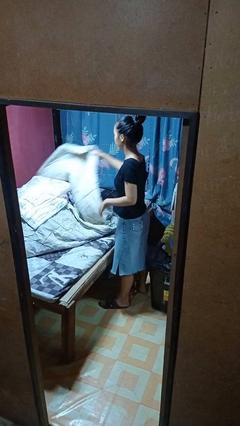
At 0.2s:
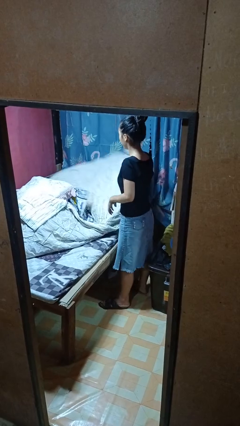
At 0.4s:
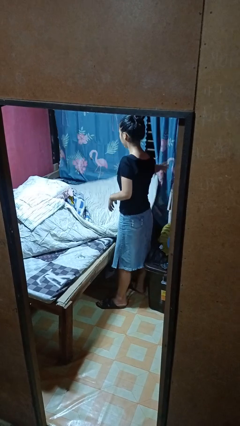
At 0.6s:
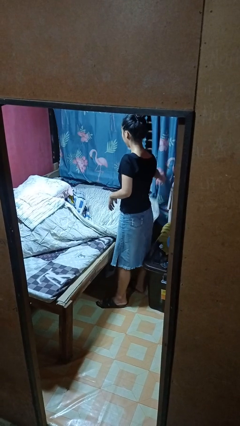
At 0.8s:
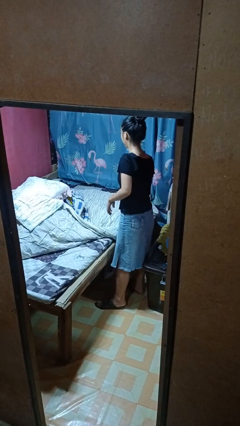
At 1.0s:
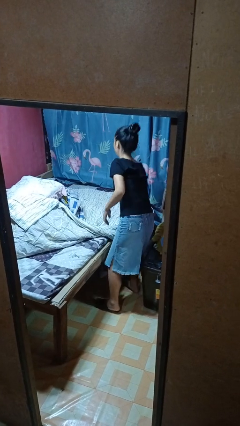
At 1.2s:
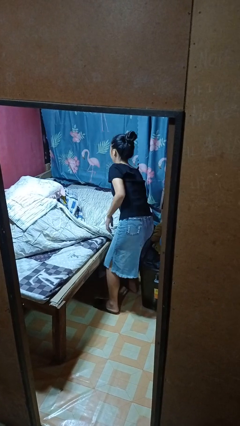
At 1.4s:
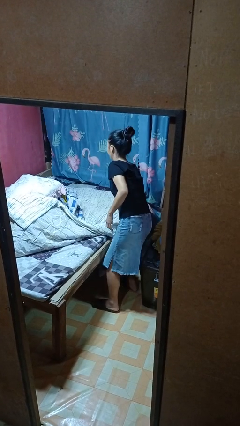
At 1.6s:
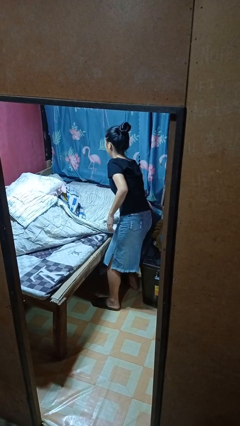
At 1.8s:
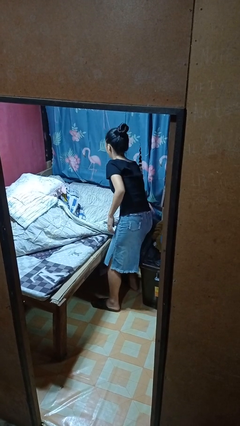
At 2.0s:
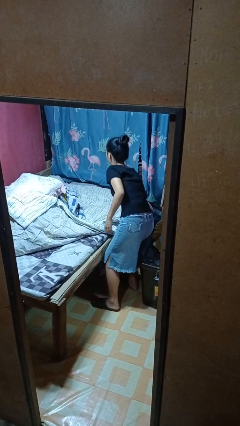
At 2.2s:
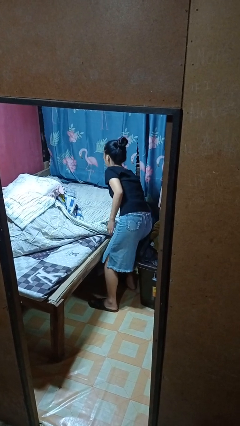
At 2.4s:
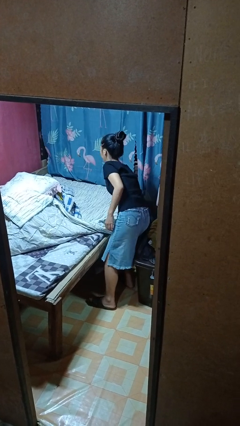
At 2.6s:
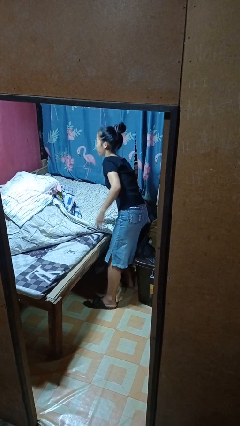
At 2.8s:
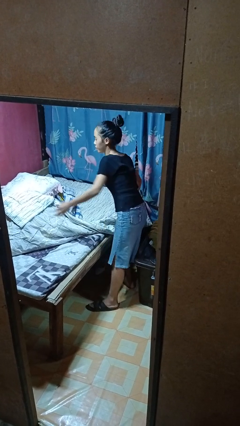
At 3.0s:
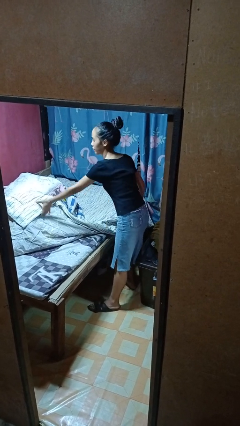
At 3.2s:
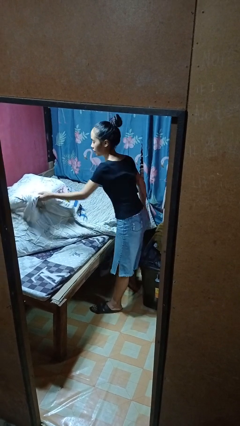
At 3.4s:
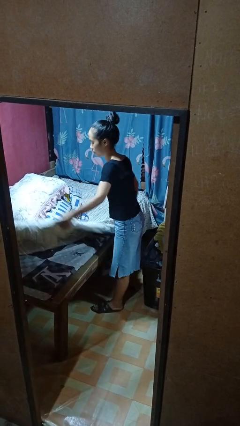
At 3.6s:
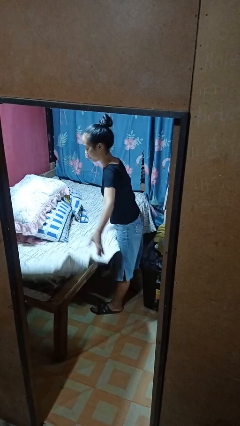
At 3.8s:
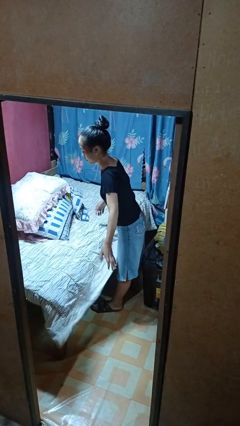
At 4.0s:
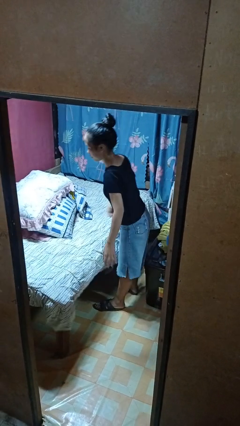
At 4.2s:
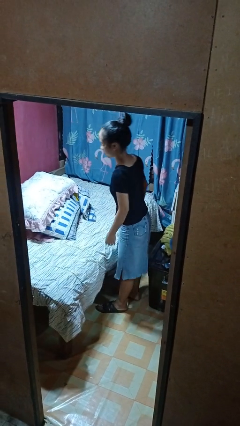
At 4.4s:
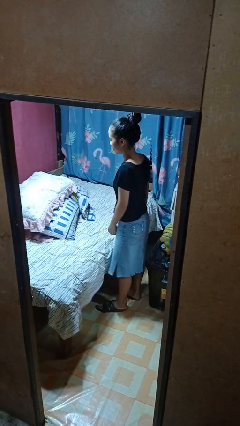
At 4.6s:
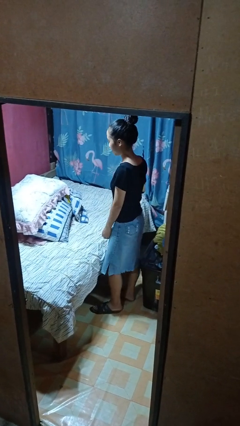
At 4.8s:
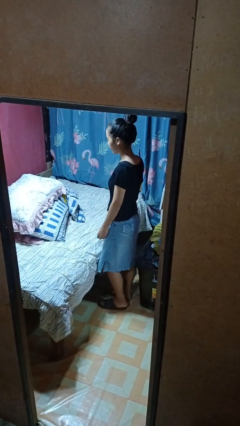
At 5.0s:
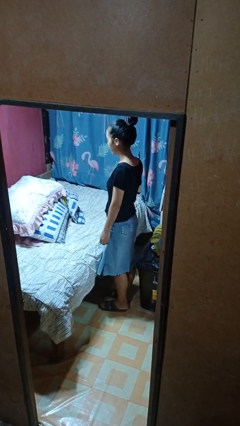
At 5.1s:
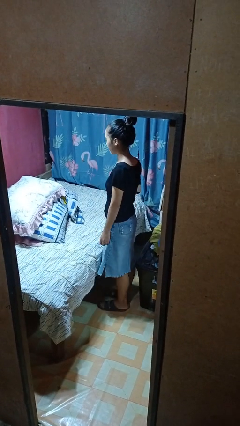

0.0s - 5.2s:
person makes bed

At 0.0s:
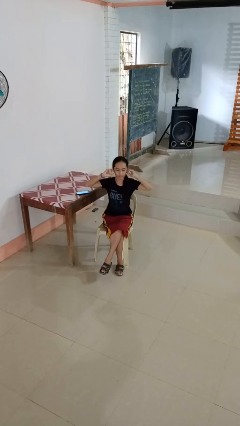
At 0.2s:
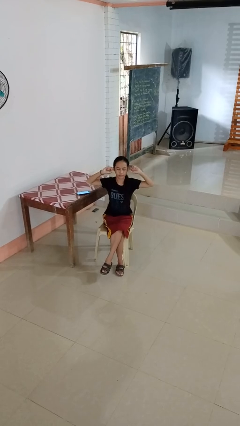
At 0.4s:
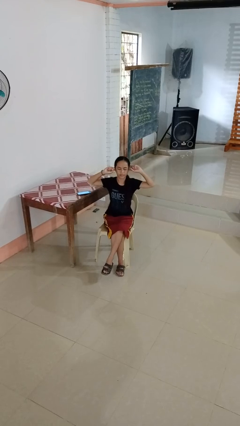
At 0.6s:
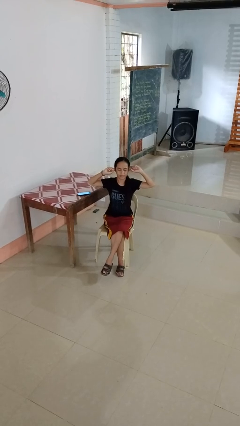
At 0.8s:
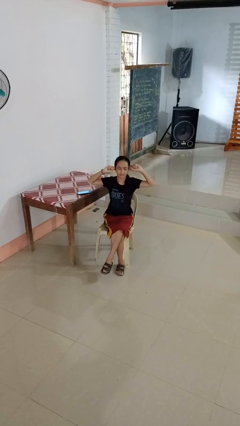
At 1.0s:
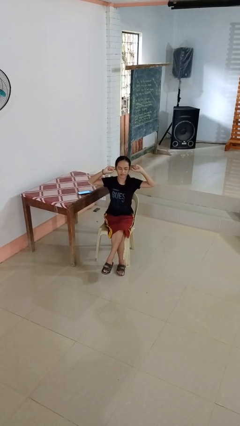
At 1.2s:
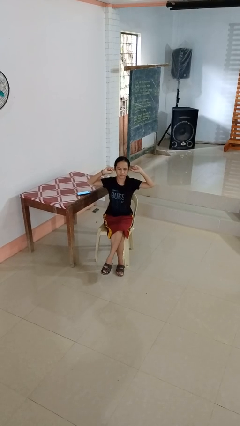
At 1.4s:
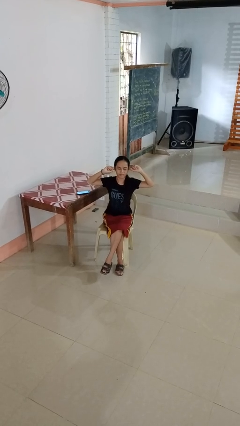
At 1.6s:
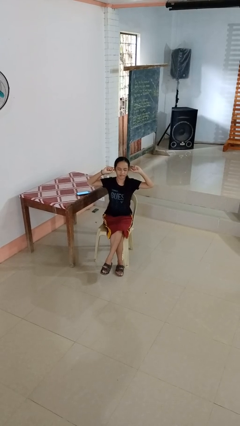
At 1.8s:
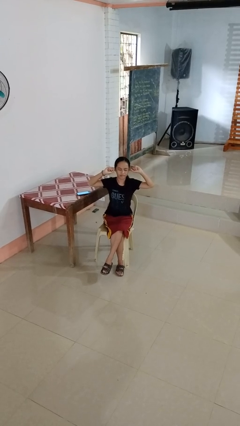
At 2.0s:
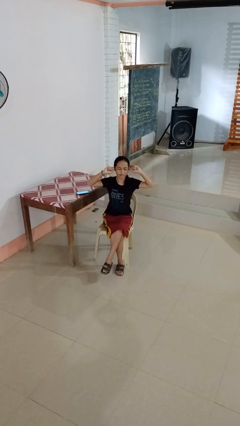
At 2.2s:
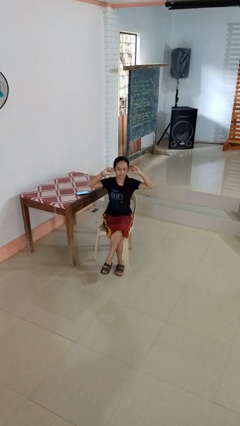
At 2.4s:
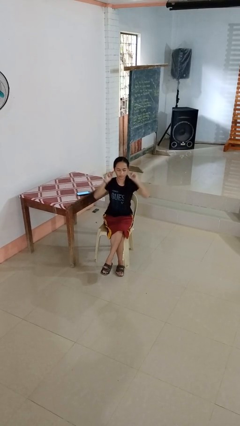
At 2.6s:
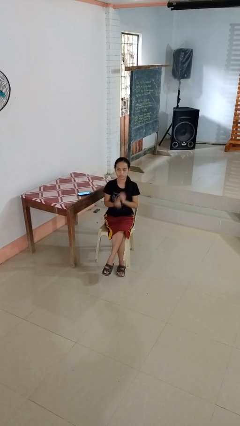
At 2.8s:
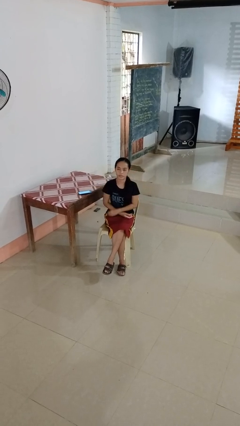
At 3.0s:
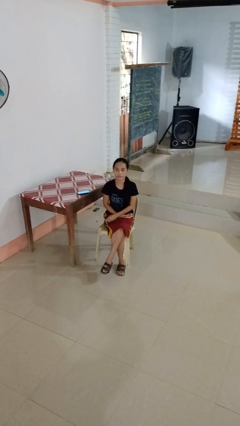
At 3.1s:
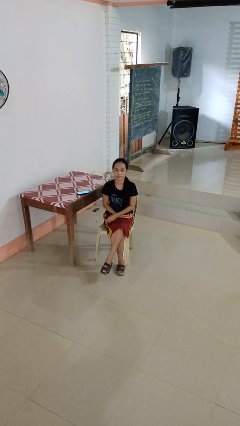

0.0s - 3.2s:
person puts fingers in ear

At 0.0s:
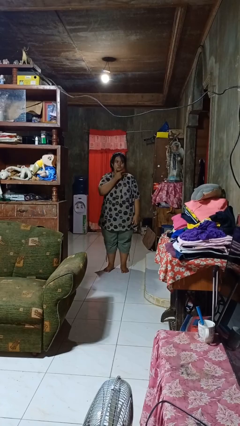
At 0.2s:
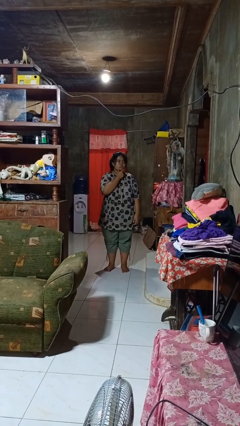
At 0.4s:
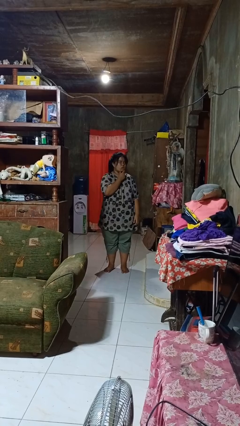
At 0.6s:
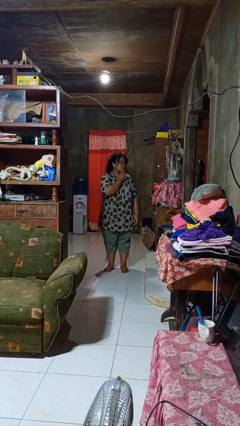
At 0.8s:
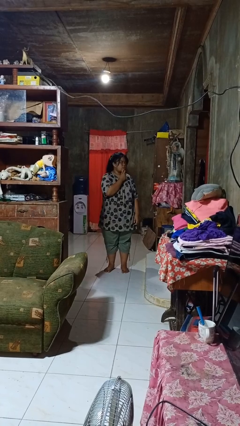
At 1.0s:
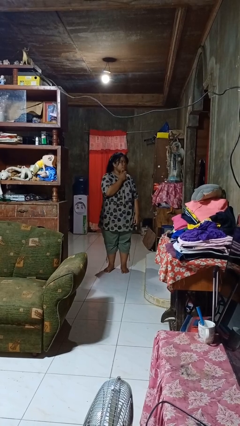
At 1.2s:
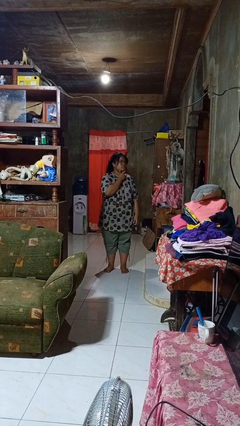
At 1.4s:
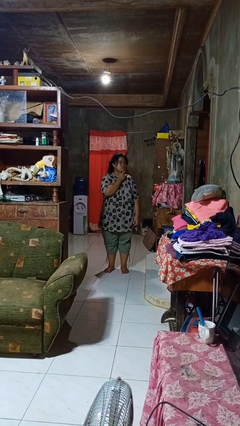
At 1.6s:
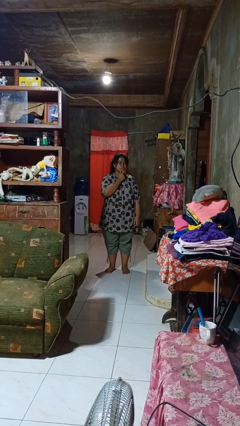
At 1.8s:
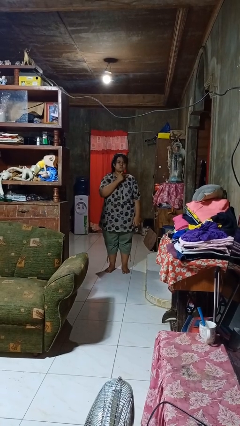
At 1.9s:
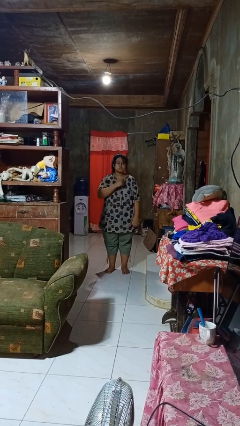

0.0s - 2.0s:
person strokes chin

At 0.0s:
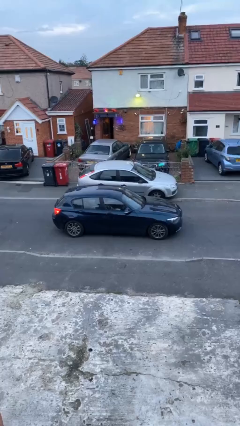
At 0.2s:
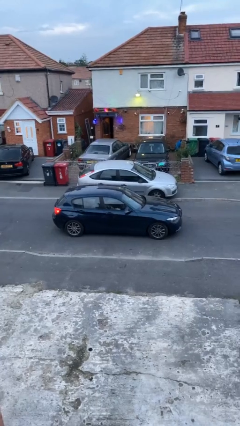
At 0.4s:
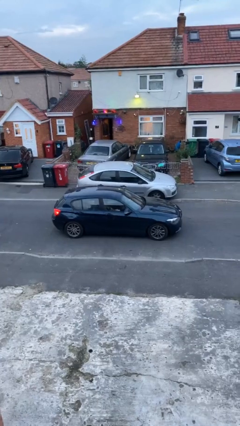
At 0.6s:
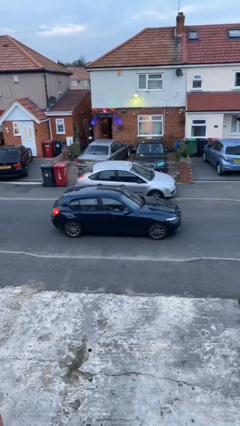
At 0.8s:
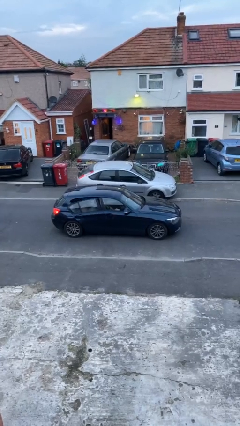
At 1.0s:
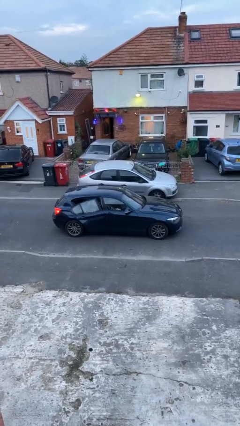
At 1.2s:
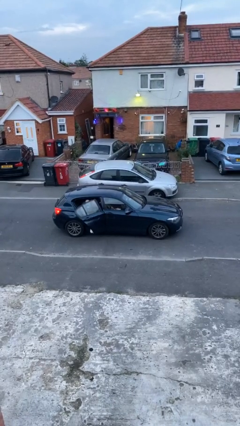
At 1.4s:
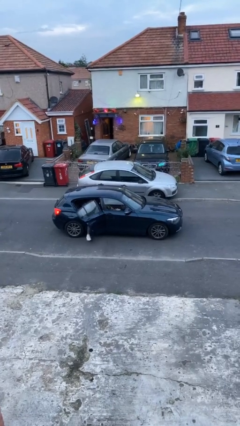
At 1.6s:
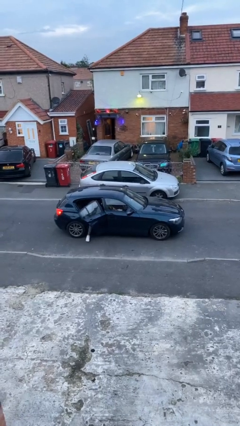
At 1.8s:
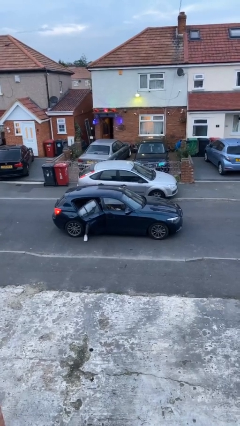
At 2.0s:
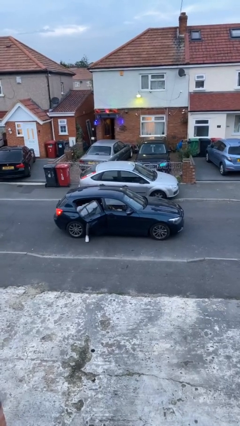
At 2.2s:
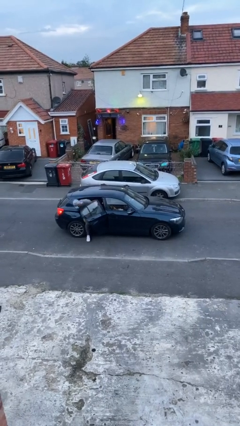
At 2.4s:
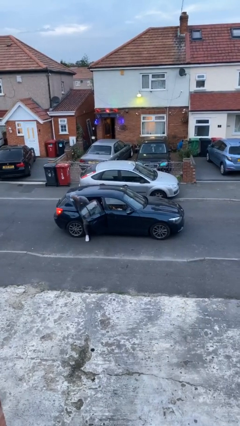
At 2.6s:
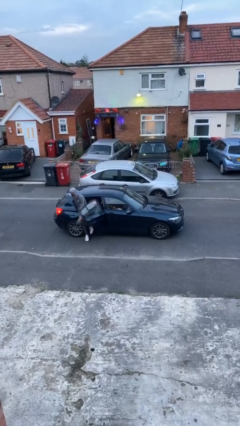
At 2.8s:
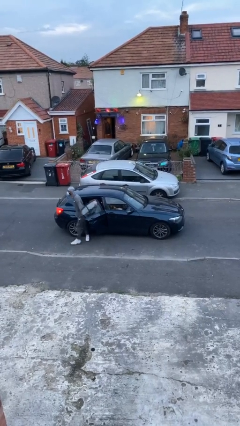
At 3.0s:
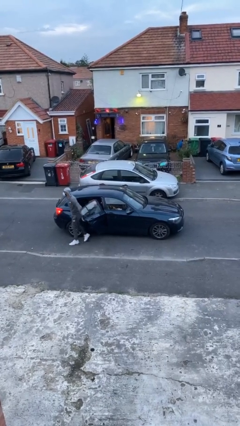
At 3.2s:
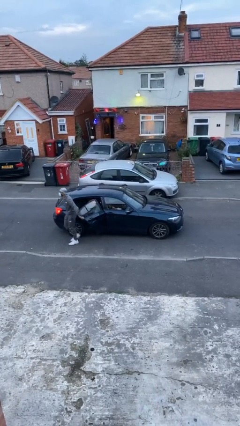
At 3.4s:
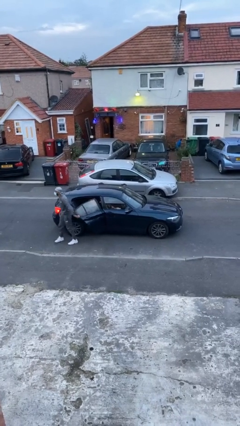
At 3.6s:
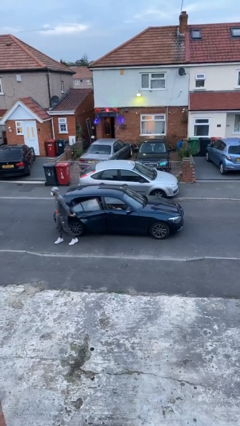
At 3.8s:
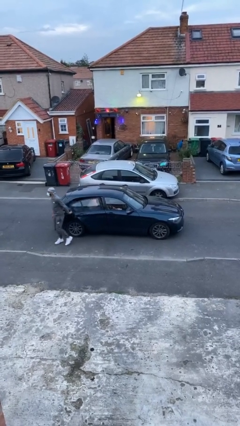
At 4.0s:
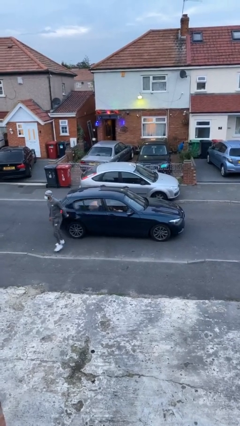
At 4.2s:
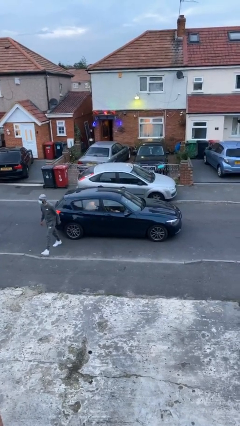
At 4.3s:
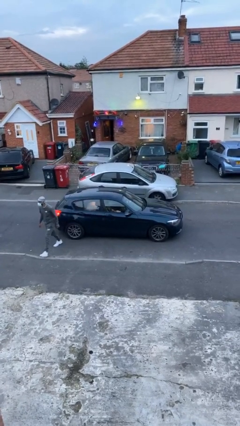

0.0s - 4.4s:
car drops off person

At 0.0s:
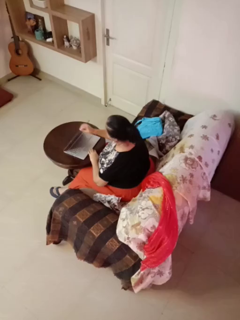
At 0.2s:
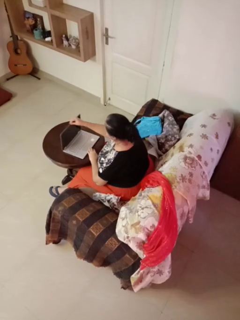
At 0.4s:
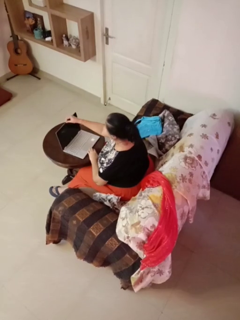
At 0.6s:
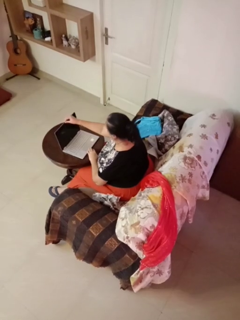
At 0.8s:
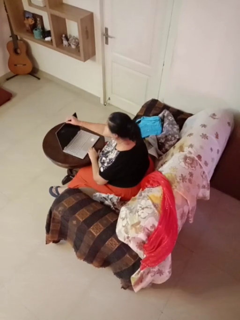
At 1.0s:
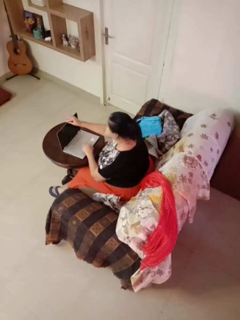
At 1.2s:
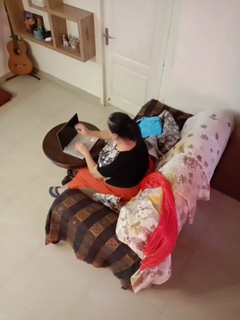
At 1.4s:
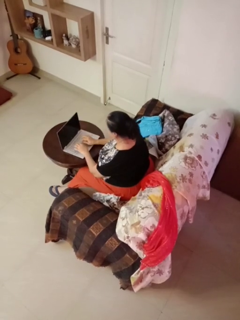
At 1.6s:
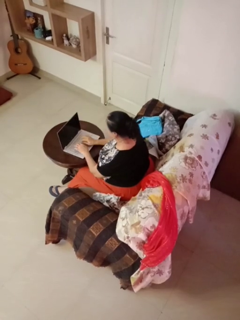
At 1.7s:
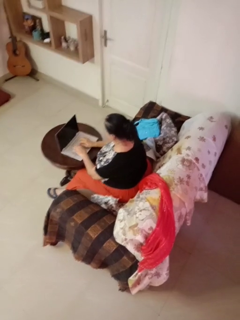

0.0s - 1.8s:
person opens laptop

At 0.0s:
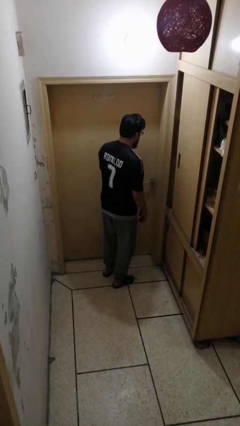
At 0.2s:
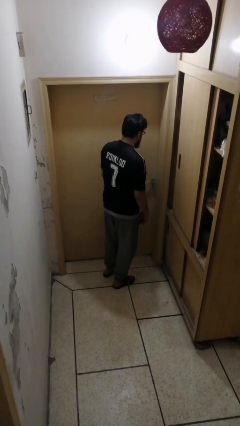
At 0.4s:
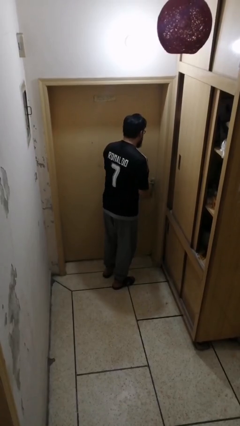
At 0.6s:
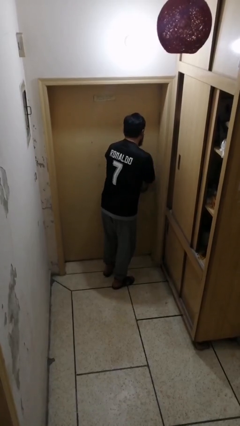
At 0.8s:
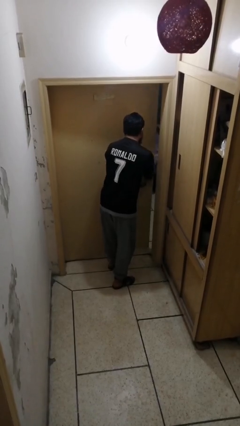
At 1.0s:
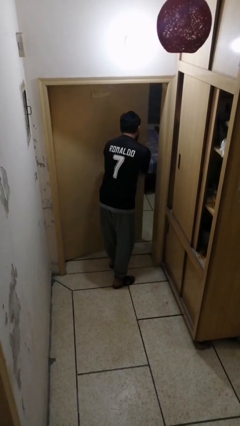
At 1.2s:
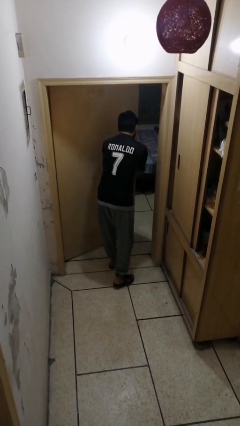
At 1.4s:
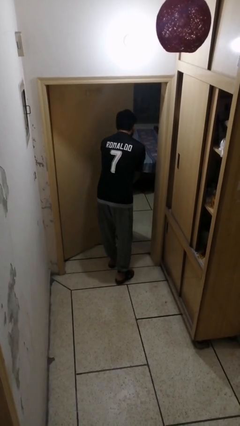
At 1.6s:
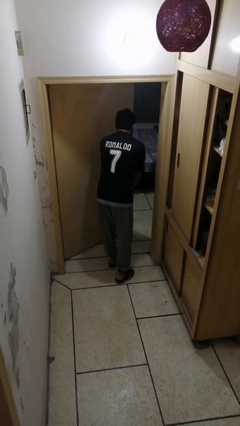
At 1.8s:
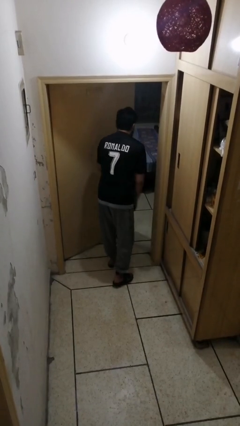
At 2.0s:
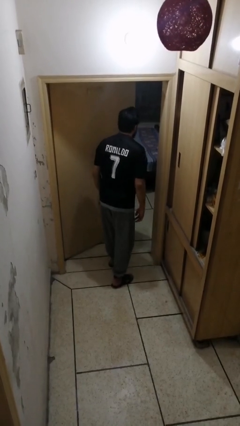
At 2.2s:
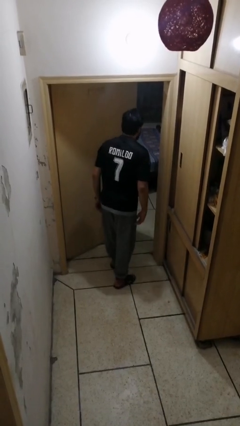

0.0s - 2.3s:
person opens facility door
